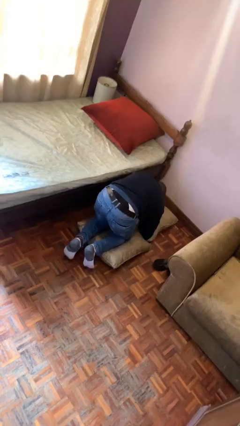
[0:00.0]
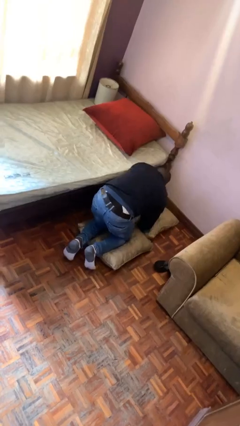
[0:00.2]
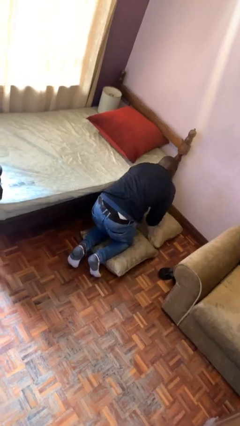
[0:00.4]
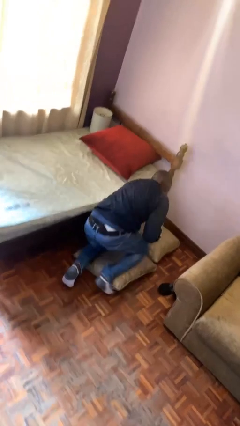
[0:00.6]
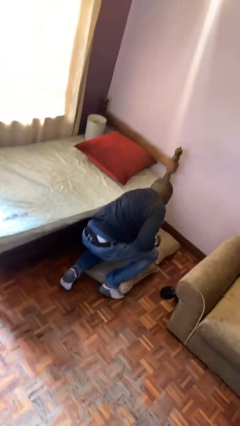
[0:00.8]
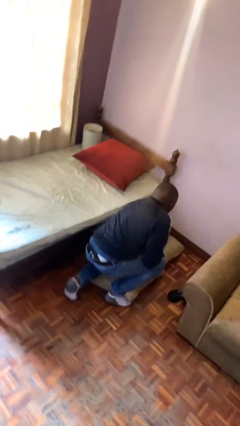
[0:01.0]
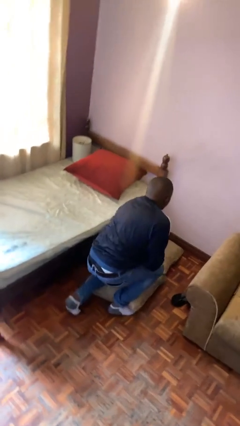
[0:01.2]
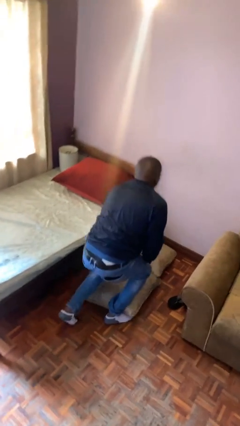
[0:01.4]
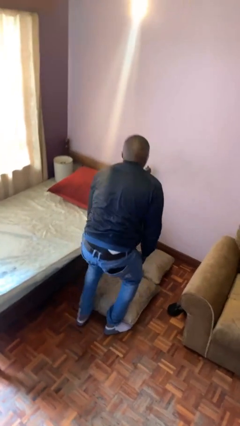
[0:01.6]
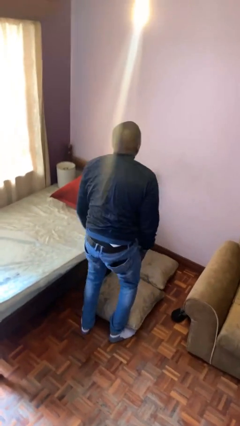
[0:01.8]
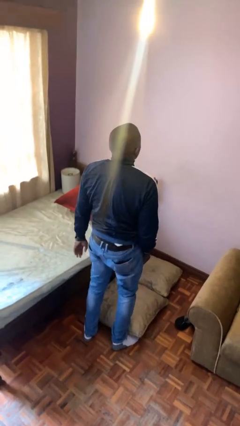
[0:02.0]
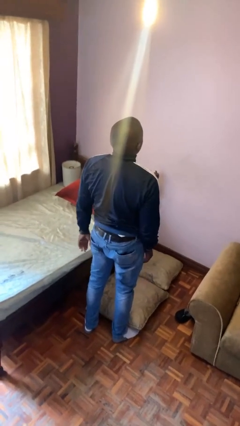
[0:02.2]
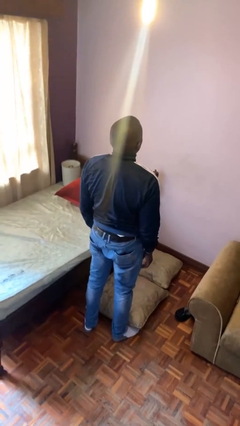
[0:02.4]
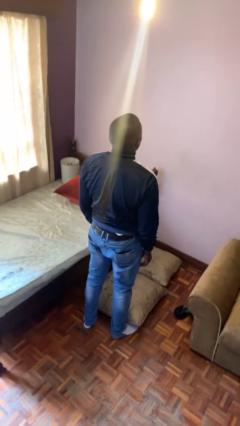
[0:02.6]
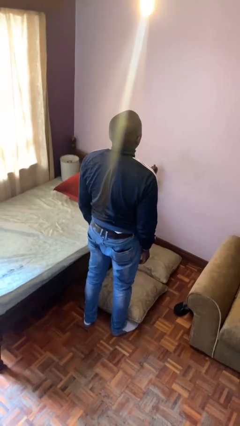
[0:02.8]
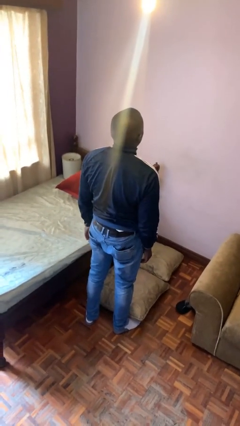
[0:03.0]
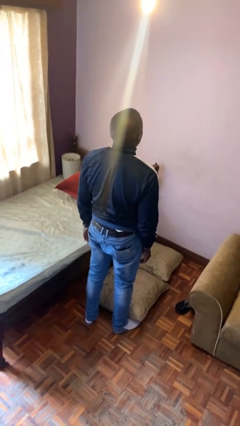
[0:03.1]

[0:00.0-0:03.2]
person stands up from floor

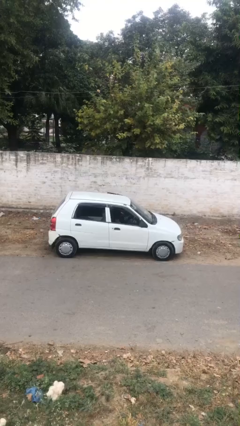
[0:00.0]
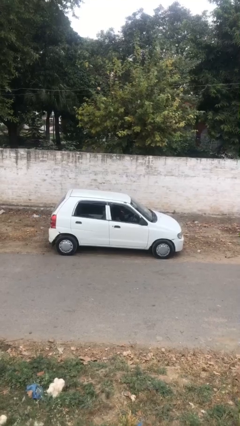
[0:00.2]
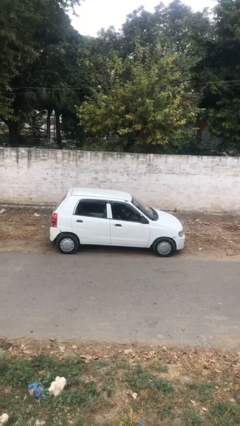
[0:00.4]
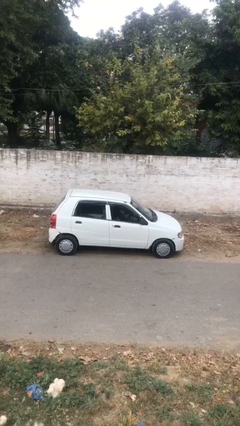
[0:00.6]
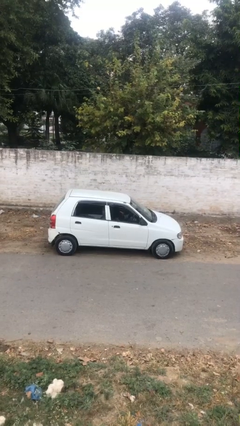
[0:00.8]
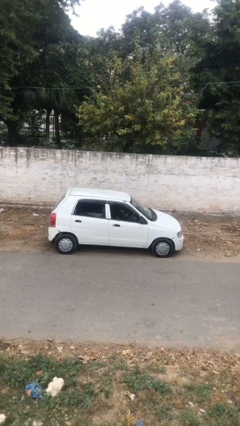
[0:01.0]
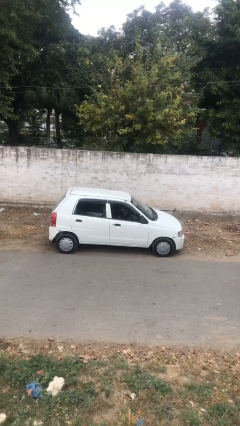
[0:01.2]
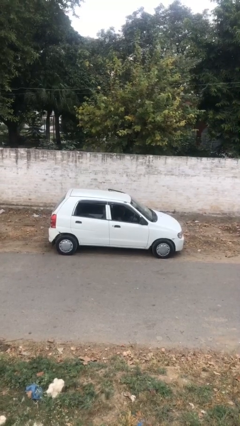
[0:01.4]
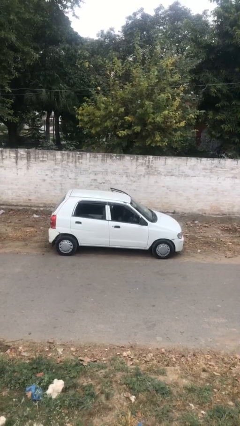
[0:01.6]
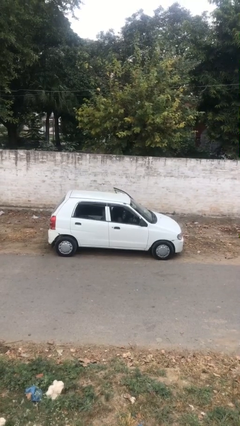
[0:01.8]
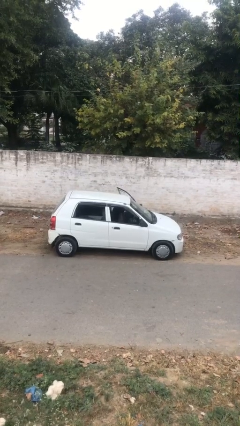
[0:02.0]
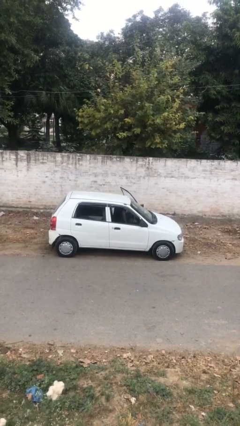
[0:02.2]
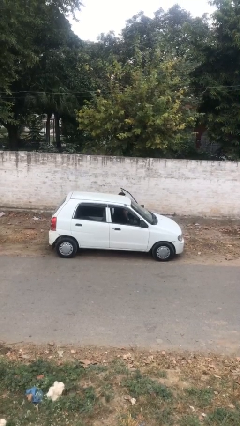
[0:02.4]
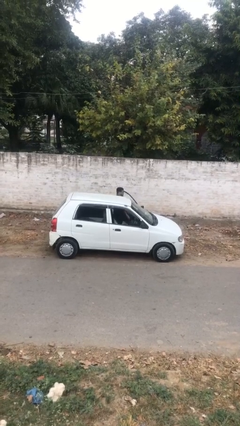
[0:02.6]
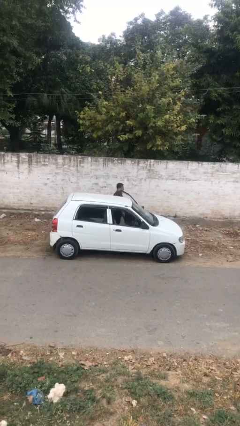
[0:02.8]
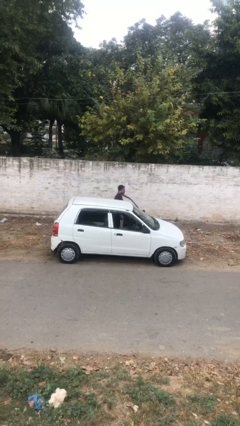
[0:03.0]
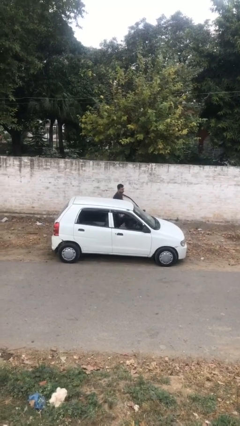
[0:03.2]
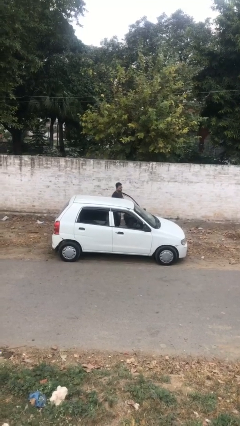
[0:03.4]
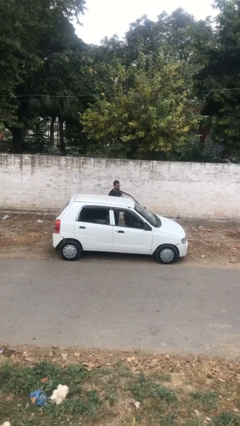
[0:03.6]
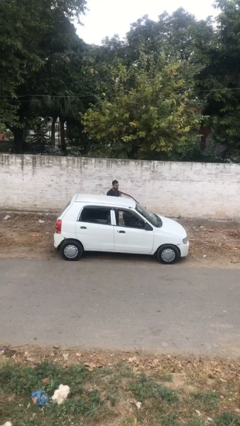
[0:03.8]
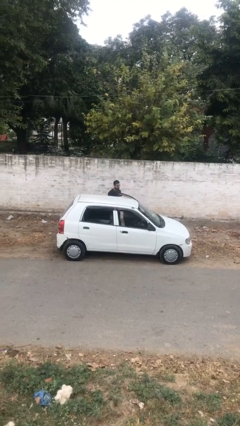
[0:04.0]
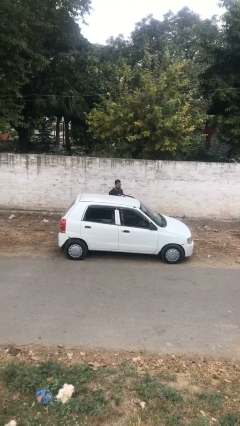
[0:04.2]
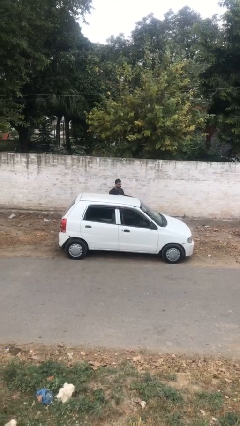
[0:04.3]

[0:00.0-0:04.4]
person exits car

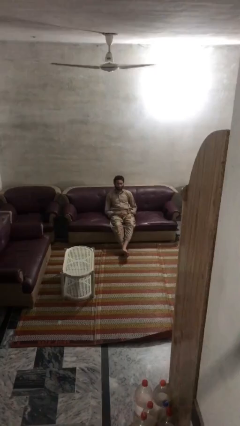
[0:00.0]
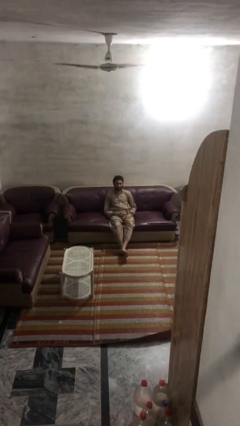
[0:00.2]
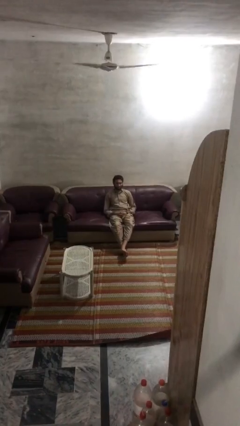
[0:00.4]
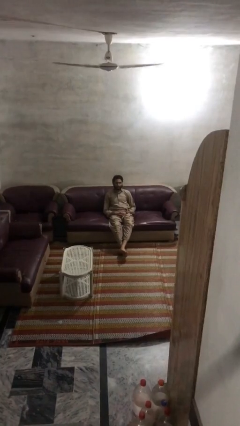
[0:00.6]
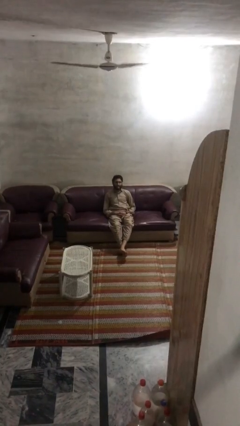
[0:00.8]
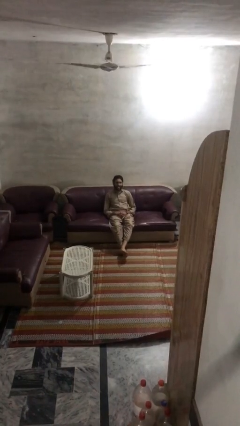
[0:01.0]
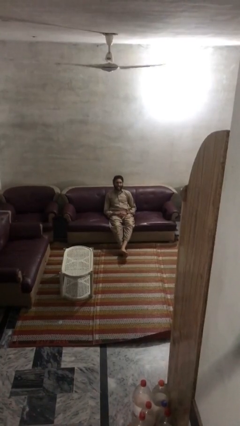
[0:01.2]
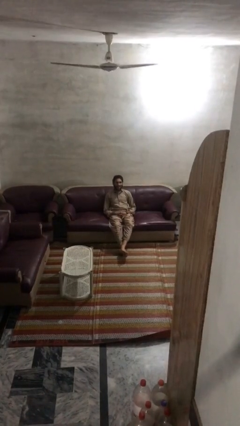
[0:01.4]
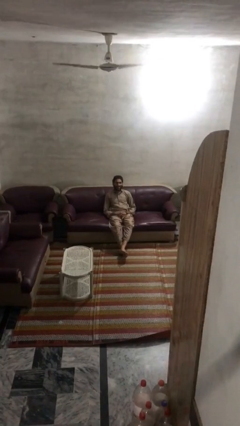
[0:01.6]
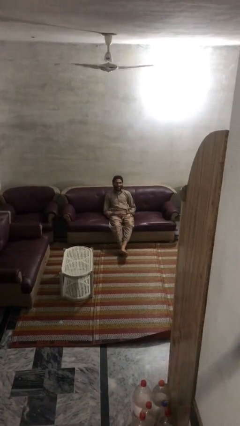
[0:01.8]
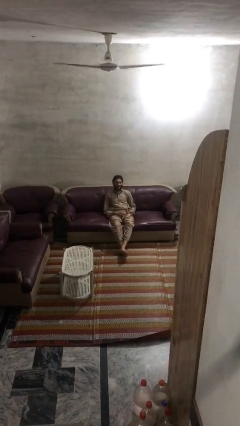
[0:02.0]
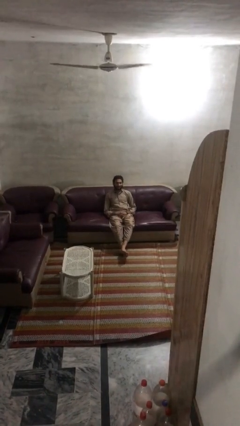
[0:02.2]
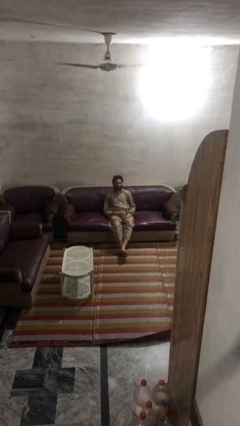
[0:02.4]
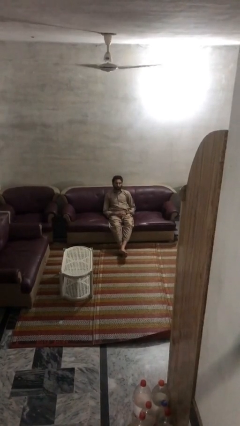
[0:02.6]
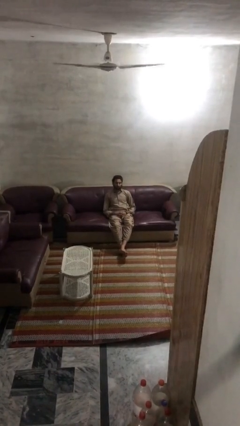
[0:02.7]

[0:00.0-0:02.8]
person sticks out tongue

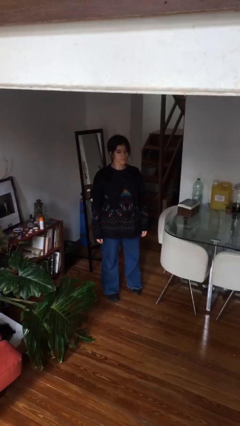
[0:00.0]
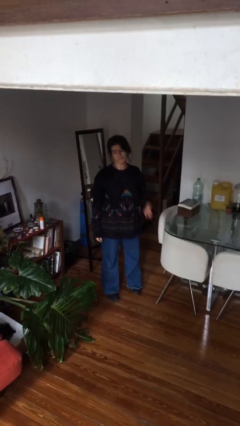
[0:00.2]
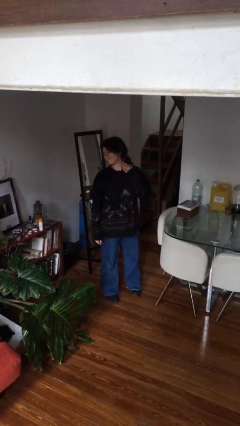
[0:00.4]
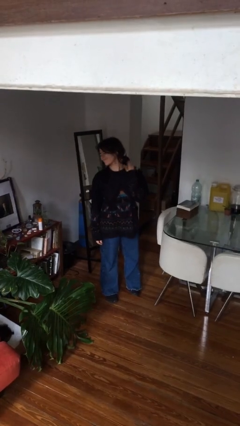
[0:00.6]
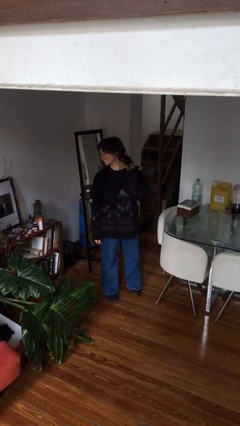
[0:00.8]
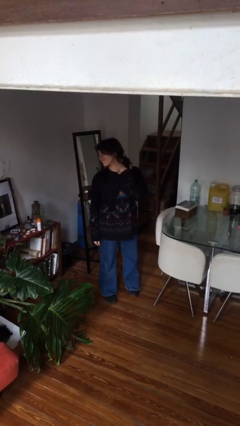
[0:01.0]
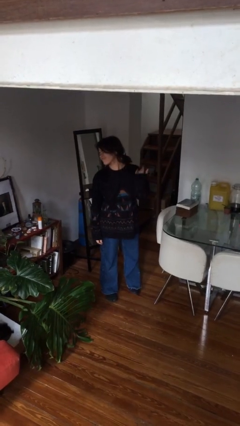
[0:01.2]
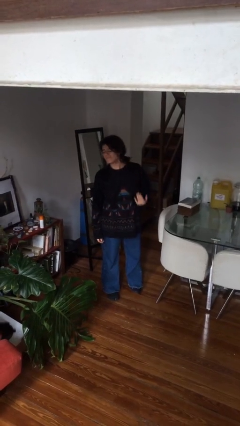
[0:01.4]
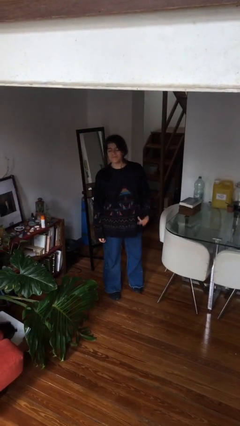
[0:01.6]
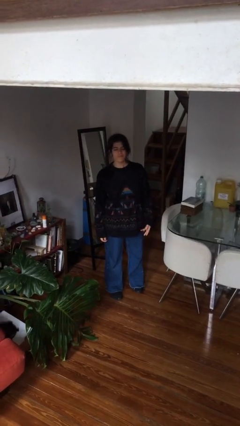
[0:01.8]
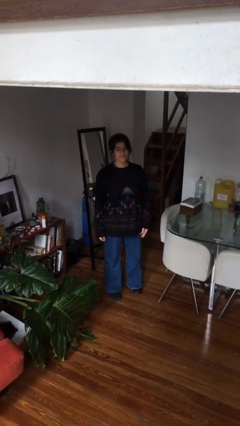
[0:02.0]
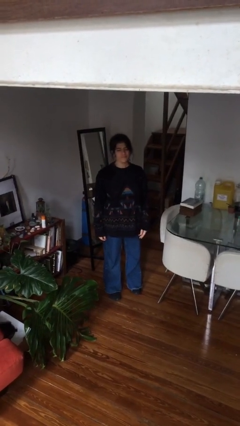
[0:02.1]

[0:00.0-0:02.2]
person swats bug

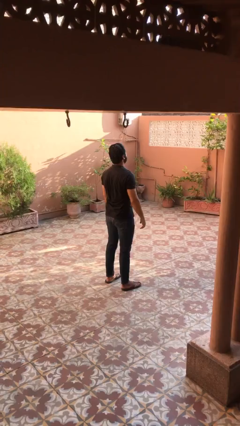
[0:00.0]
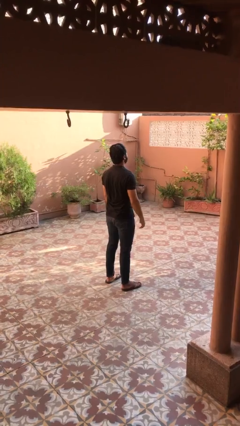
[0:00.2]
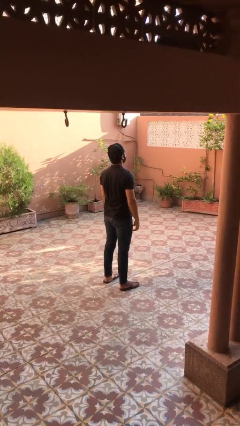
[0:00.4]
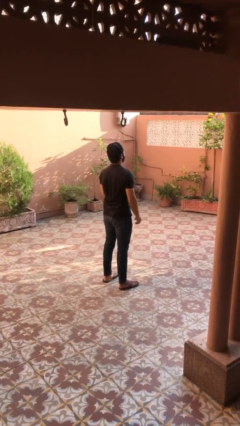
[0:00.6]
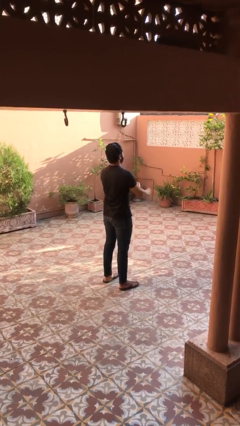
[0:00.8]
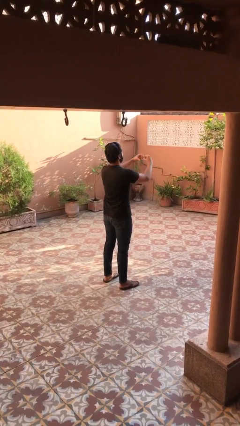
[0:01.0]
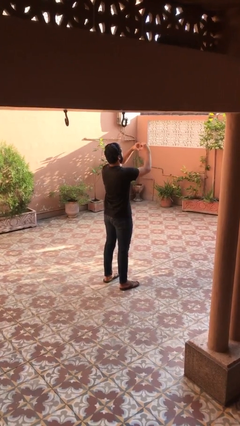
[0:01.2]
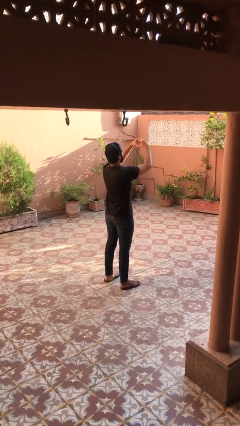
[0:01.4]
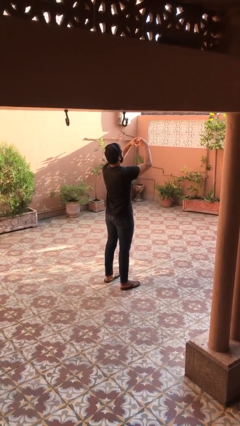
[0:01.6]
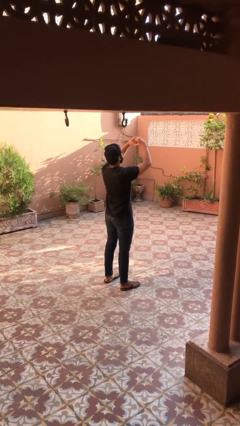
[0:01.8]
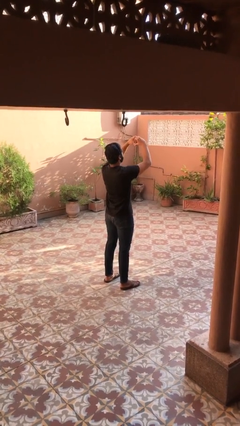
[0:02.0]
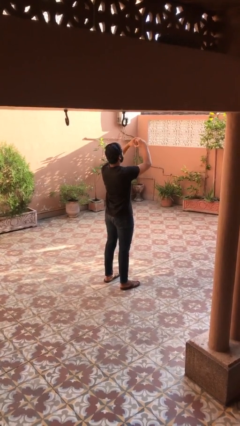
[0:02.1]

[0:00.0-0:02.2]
person gestures heart

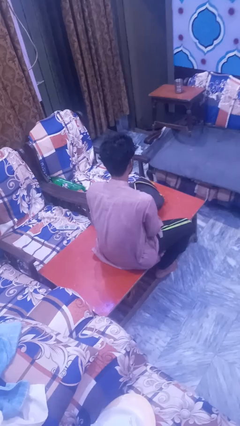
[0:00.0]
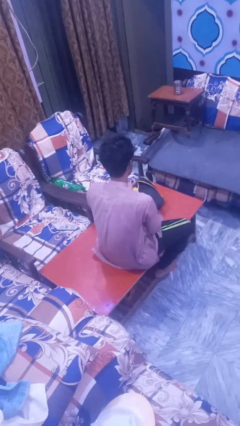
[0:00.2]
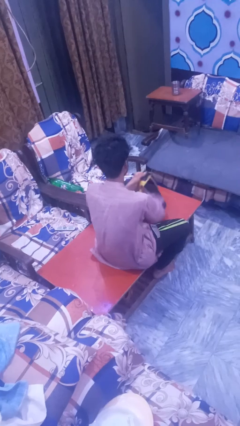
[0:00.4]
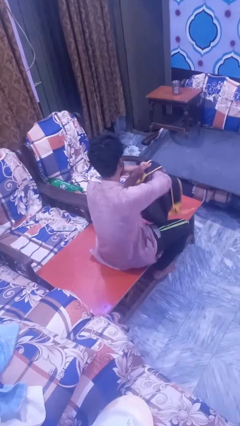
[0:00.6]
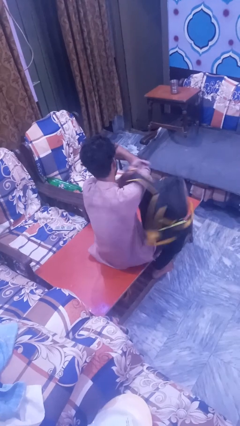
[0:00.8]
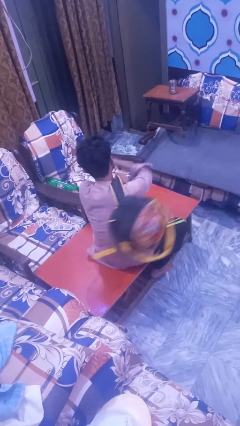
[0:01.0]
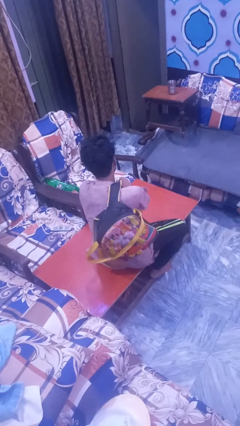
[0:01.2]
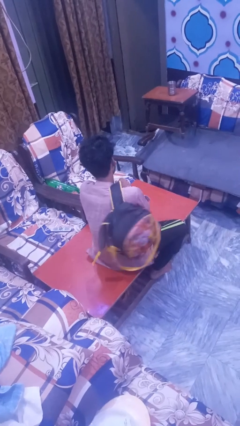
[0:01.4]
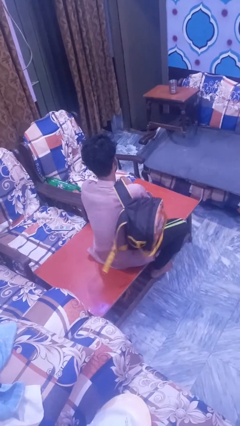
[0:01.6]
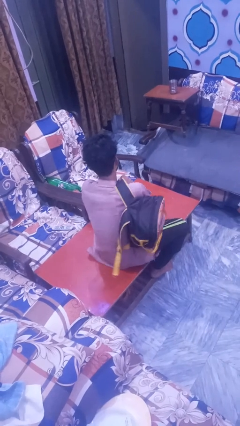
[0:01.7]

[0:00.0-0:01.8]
person puts on backpack

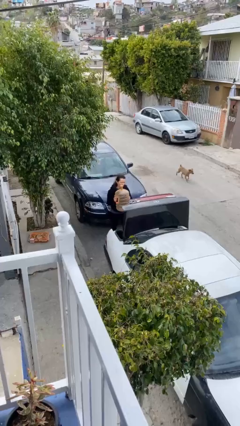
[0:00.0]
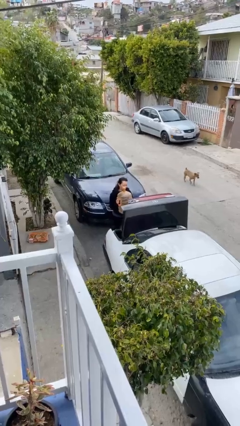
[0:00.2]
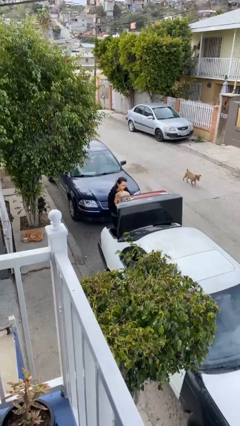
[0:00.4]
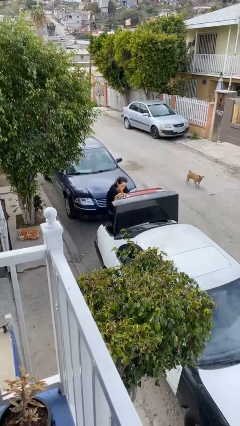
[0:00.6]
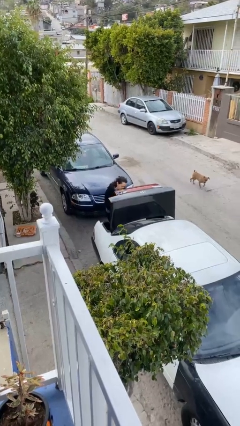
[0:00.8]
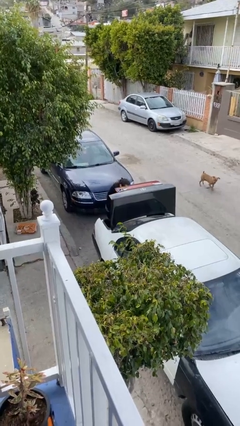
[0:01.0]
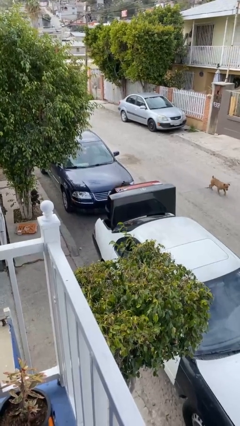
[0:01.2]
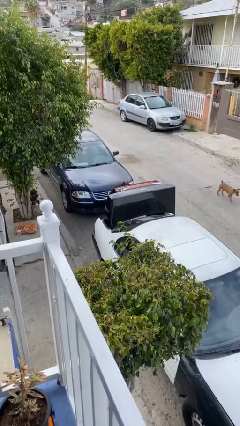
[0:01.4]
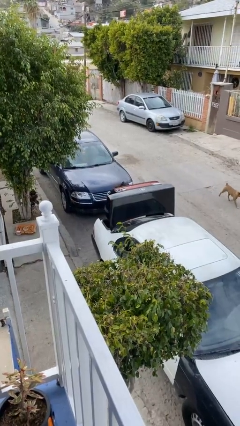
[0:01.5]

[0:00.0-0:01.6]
person loads car
